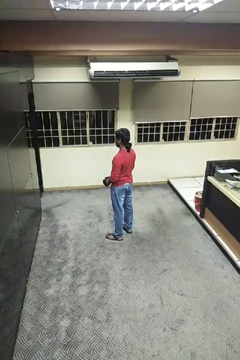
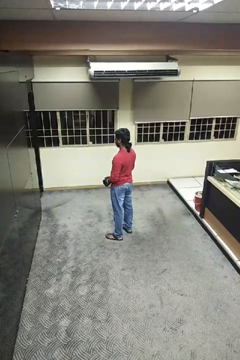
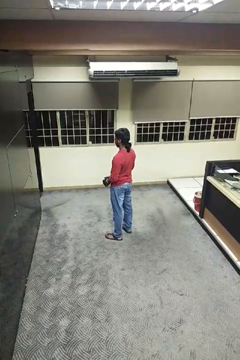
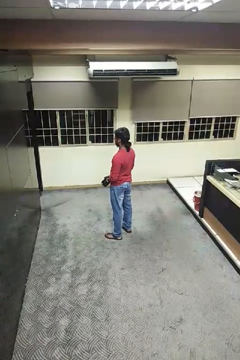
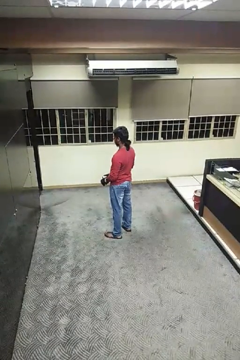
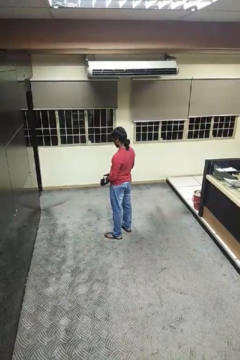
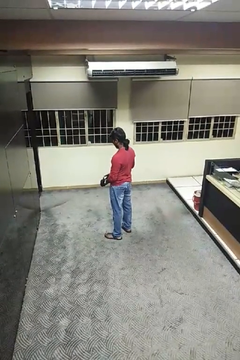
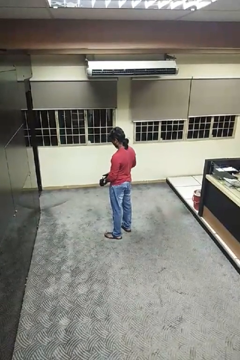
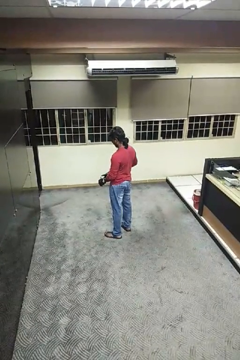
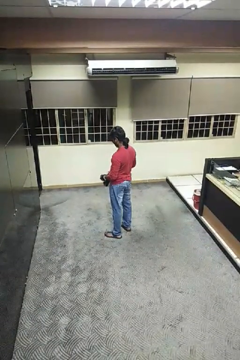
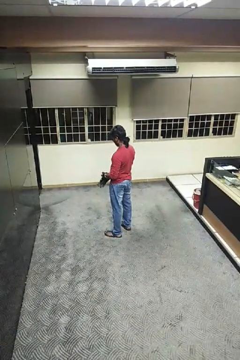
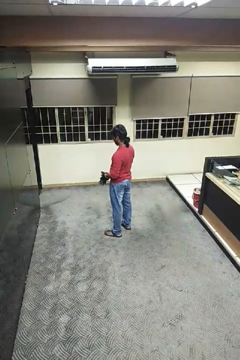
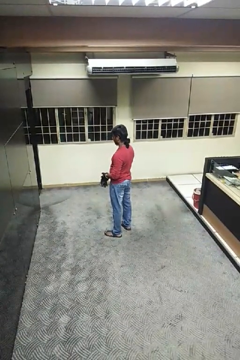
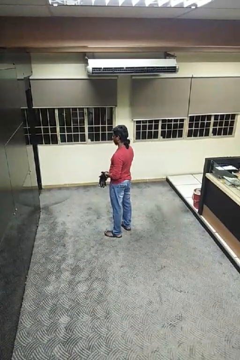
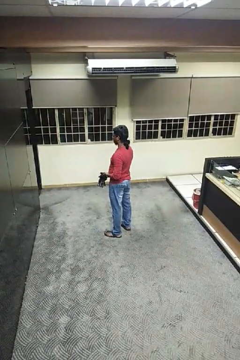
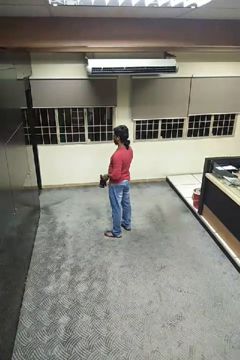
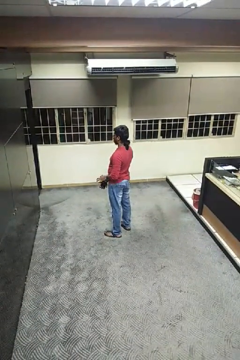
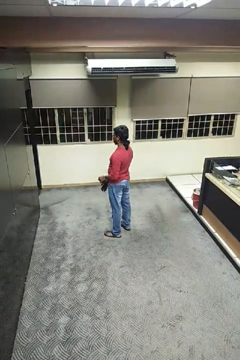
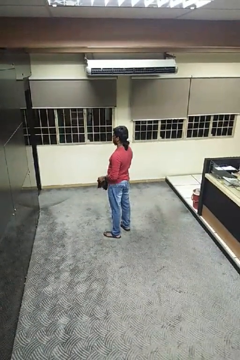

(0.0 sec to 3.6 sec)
person takes off gloves

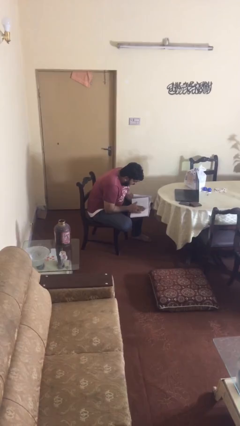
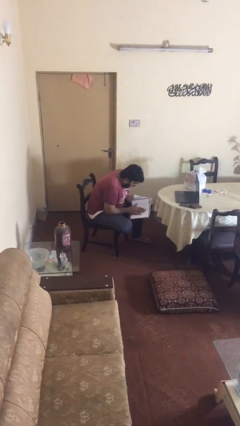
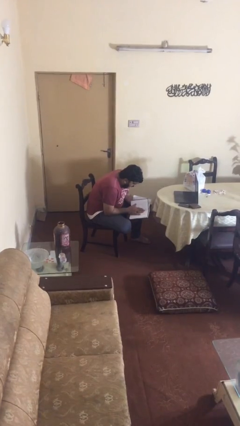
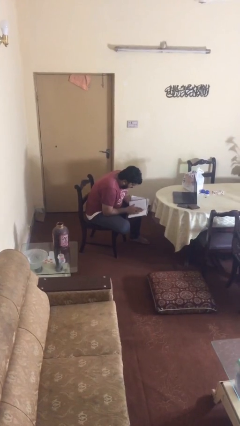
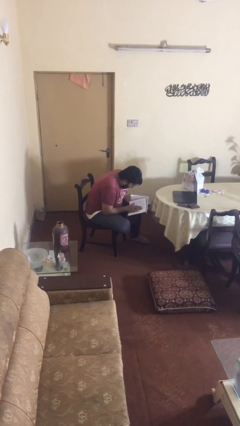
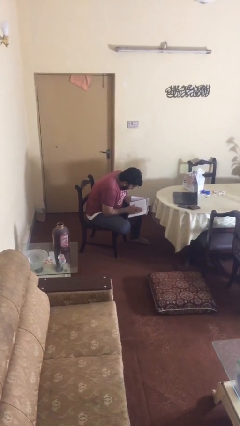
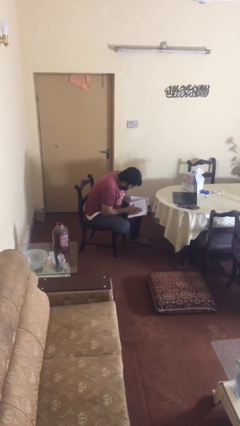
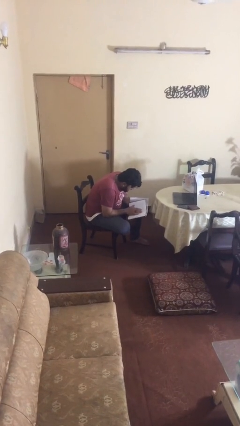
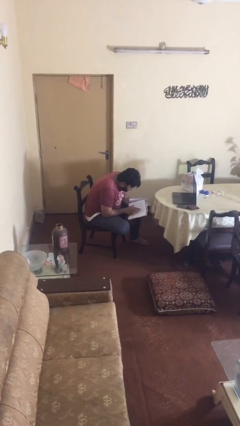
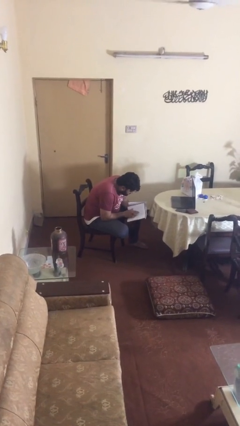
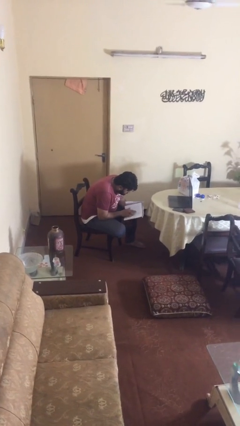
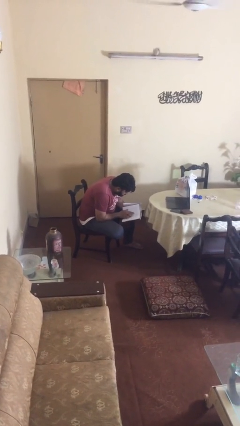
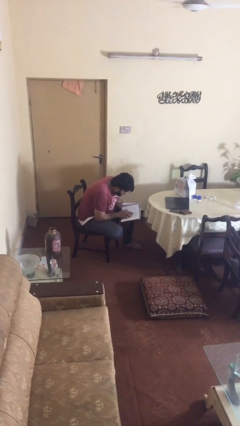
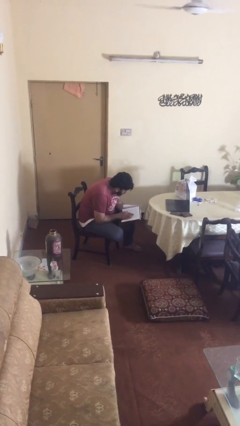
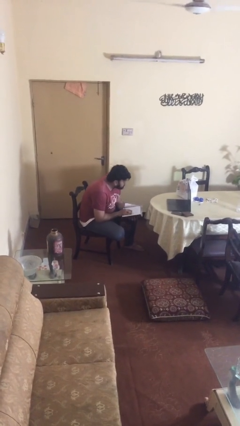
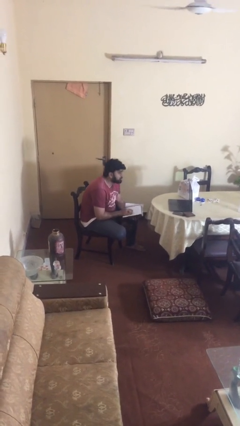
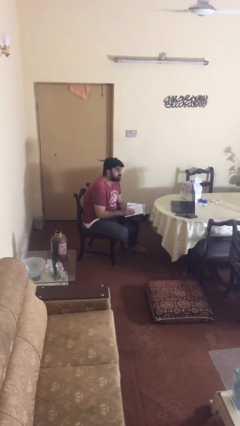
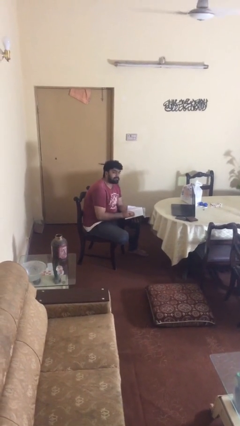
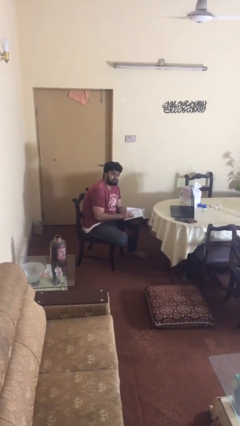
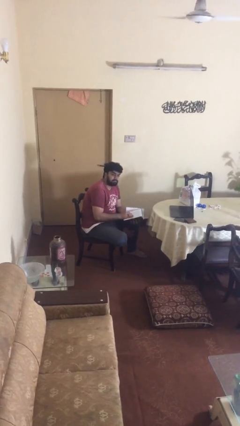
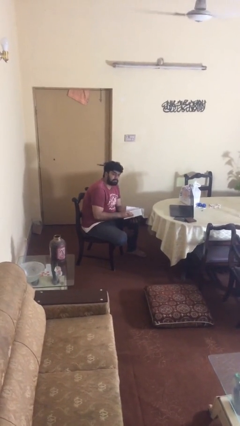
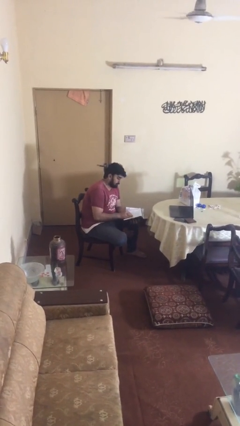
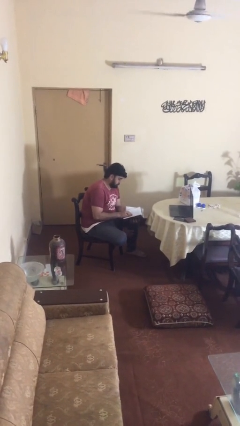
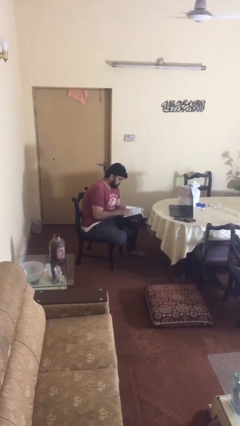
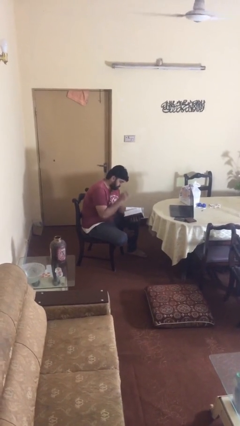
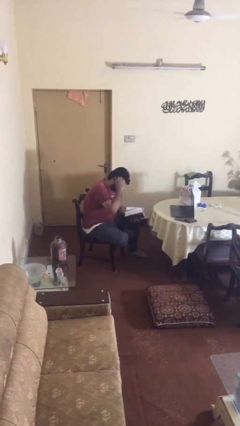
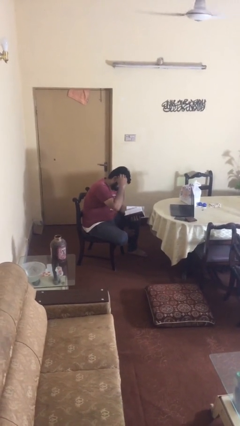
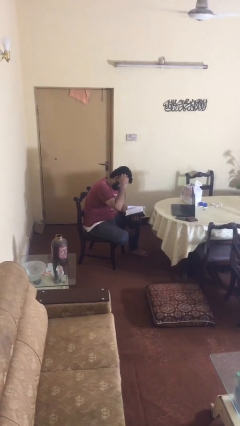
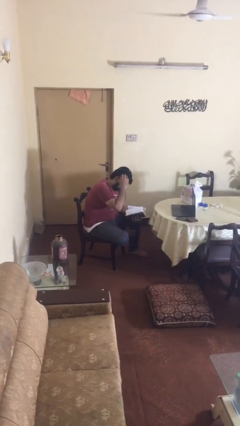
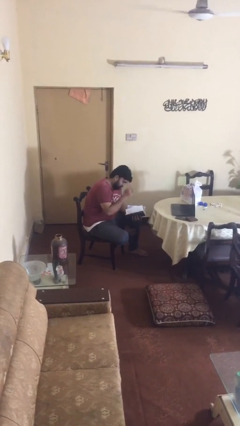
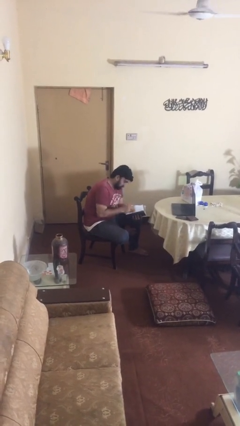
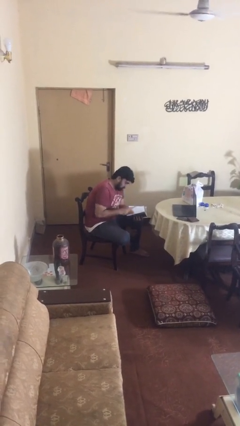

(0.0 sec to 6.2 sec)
person reads document

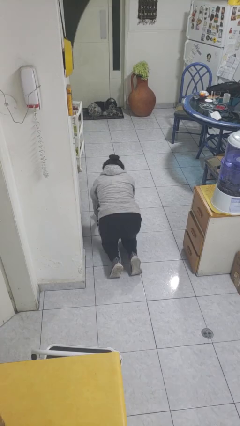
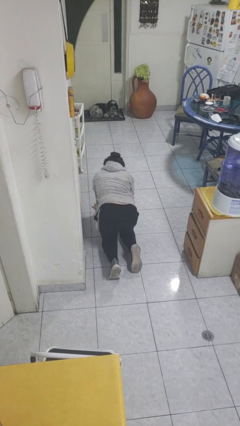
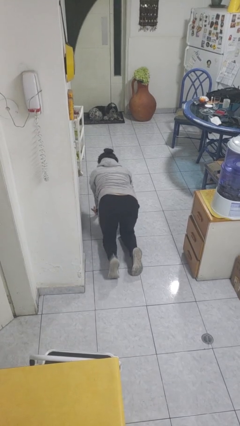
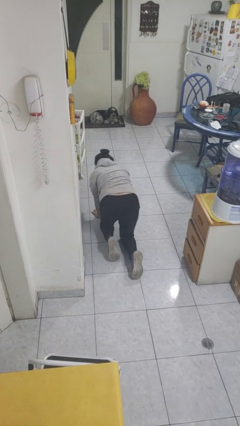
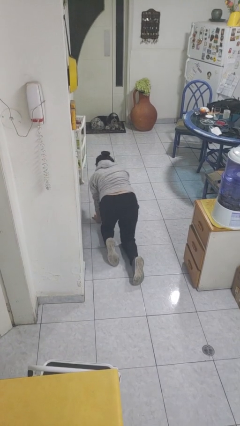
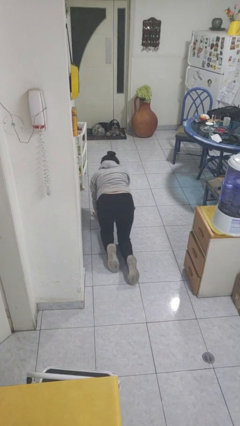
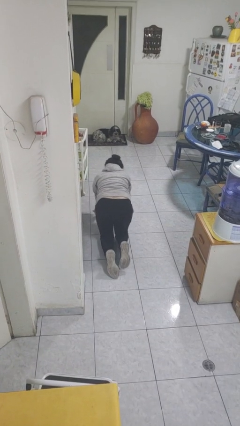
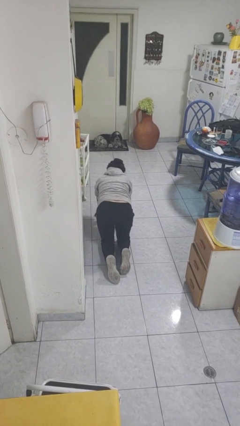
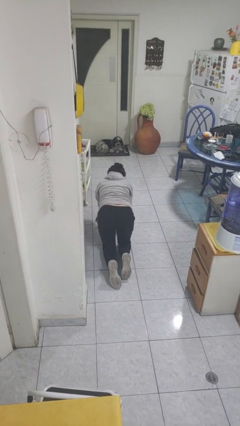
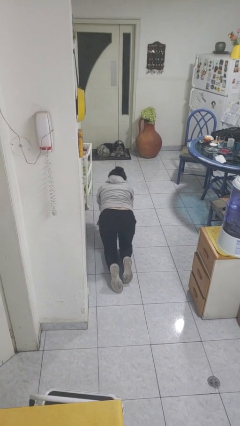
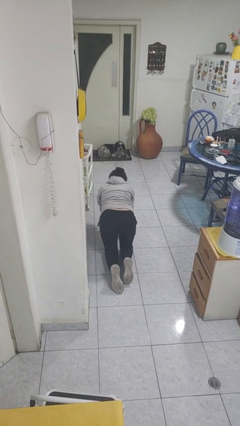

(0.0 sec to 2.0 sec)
person crawls

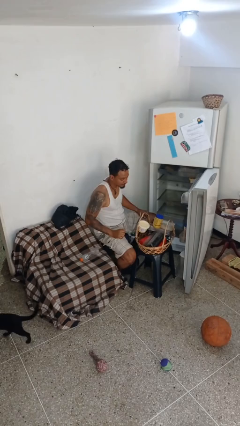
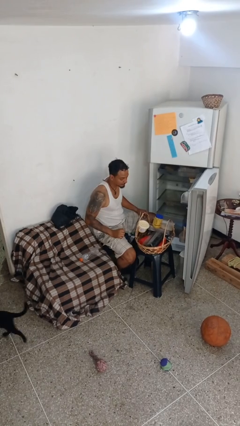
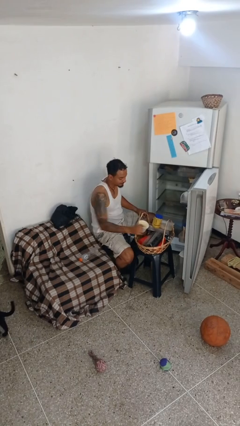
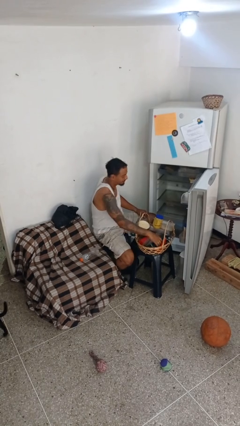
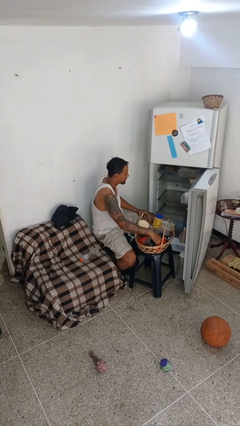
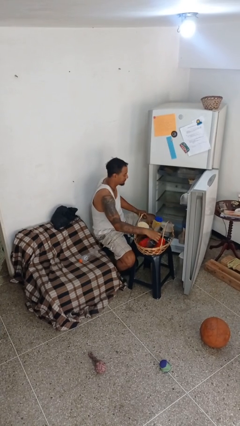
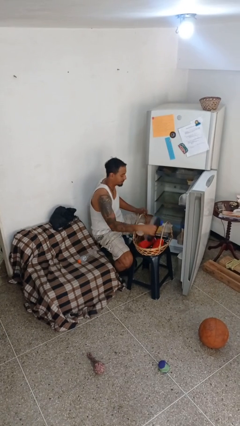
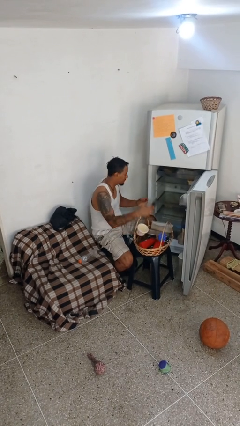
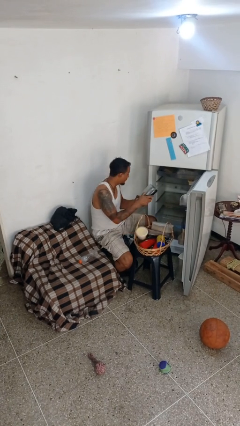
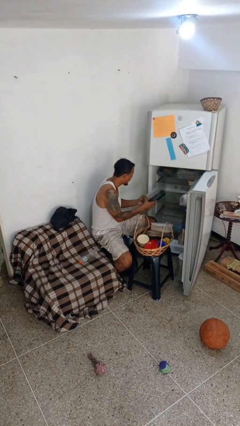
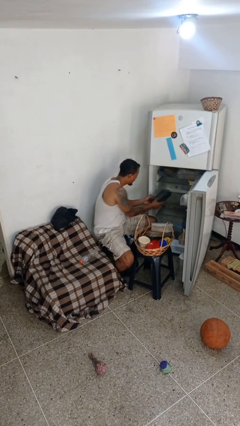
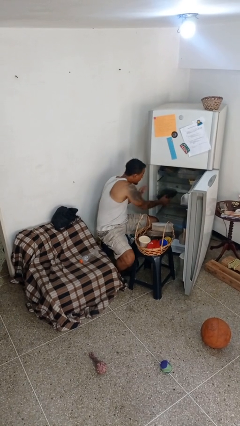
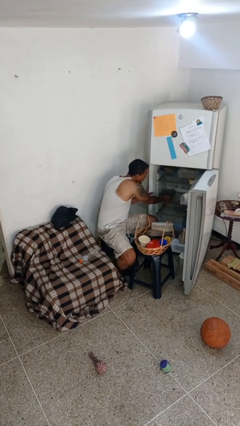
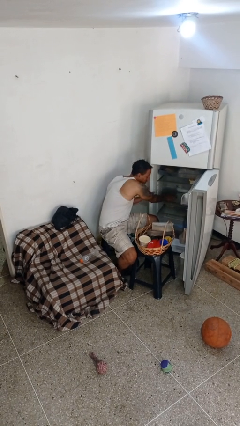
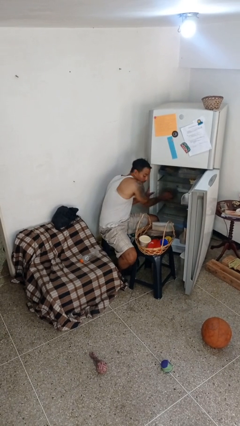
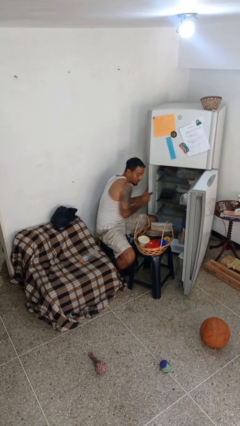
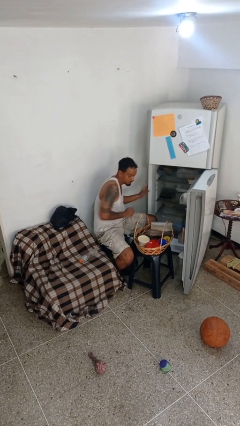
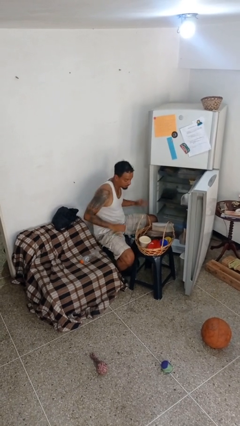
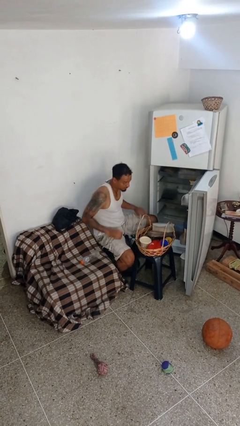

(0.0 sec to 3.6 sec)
person loads groceries into refrigerator

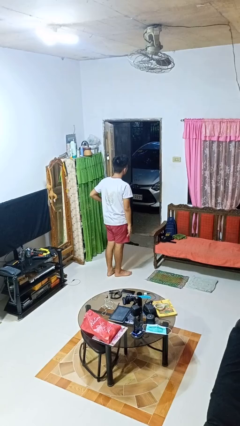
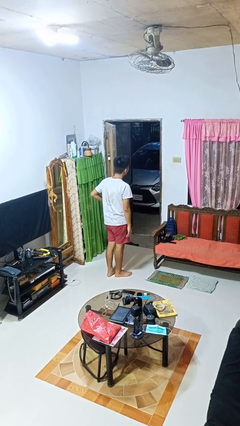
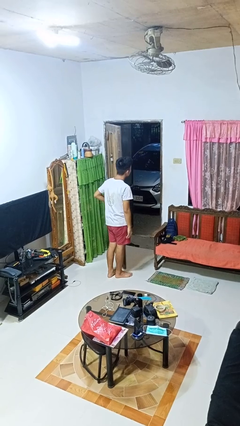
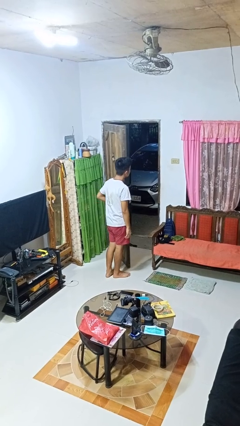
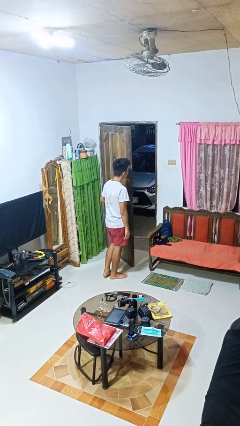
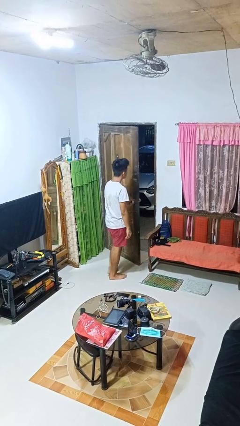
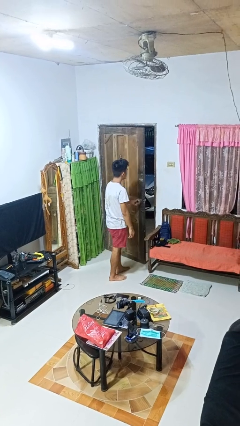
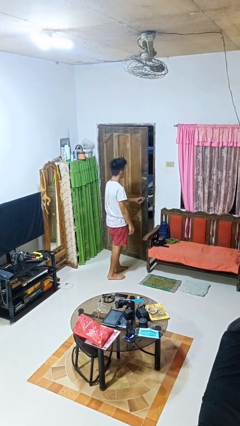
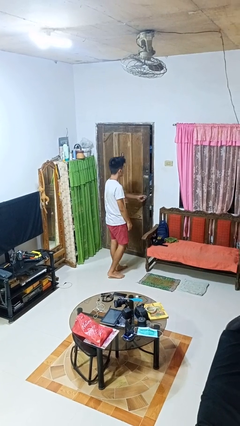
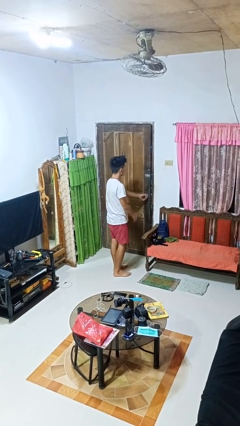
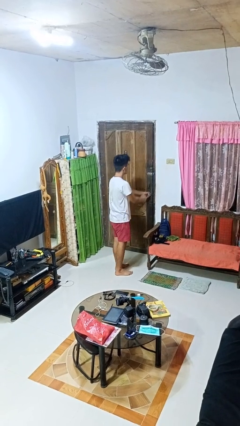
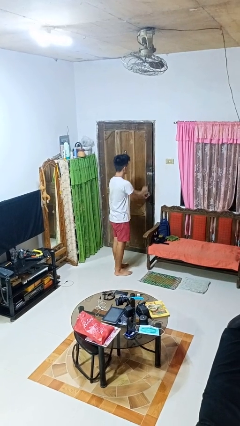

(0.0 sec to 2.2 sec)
person closes facility door

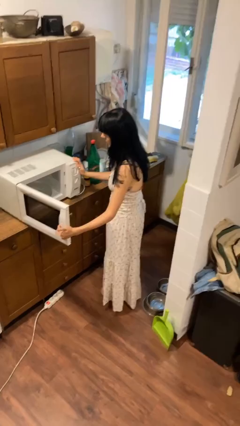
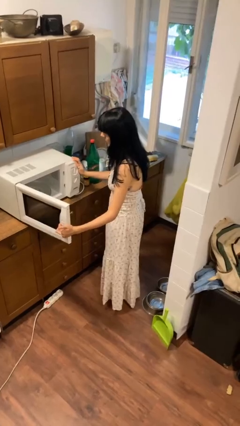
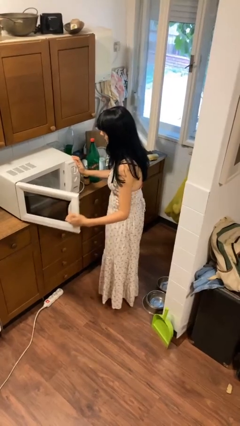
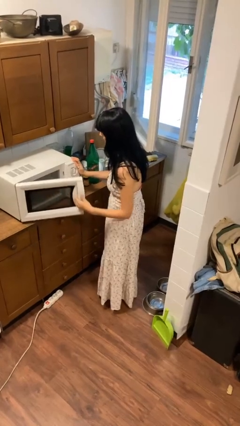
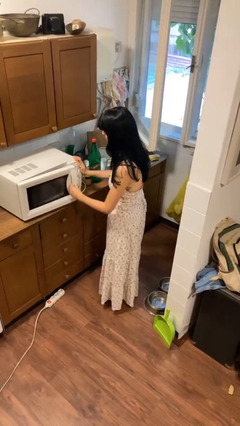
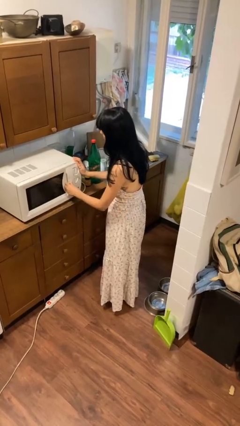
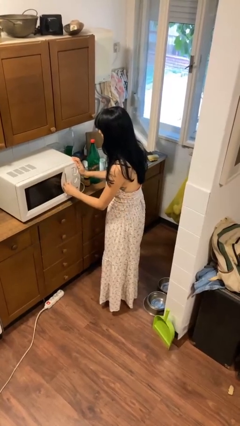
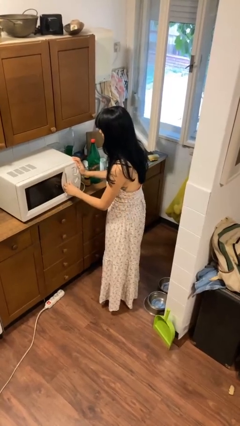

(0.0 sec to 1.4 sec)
person closes microwave
